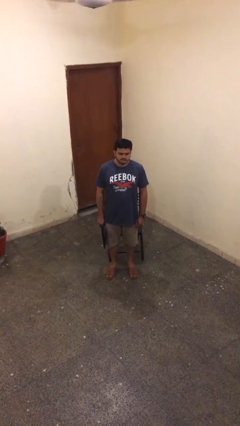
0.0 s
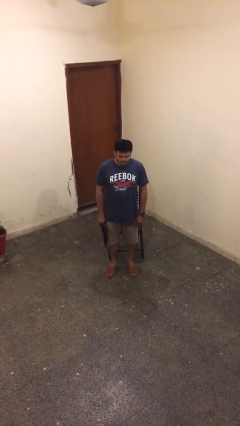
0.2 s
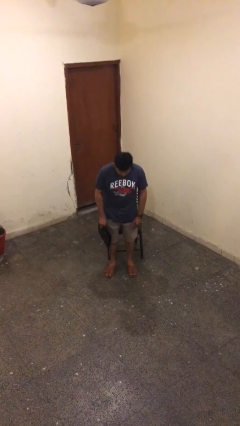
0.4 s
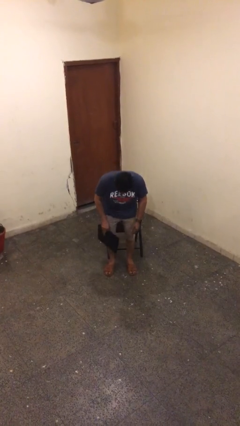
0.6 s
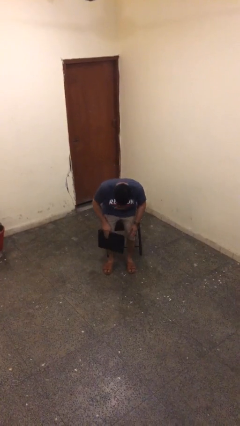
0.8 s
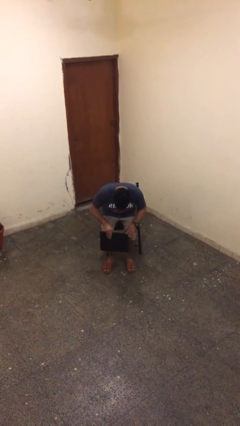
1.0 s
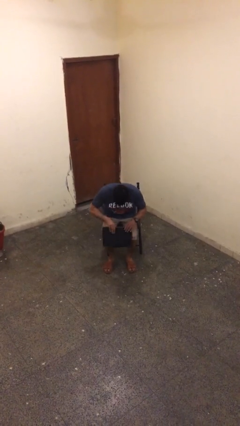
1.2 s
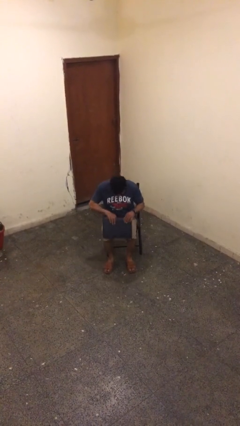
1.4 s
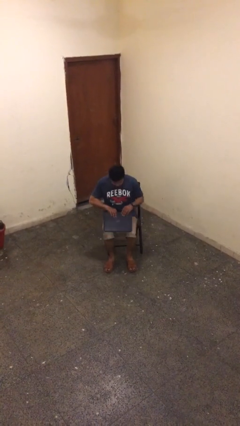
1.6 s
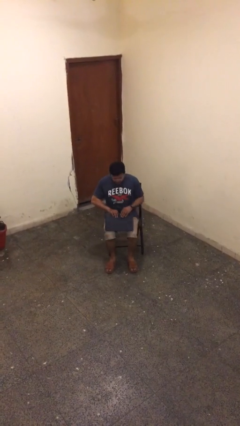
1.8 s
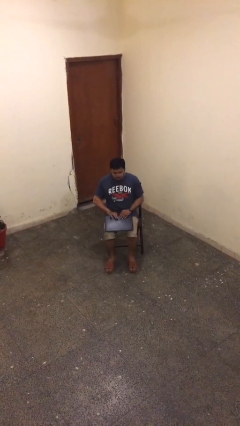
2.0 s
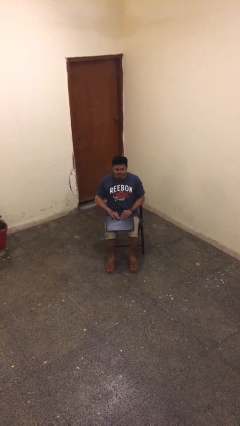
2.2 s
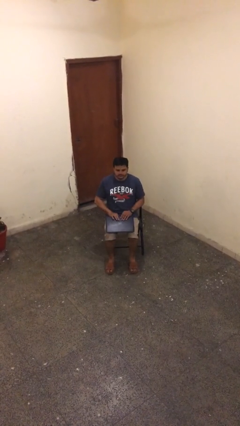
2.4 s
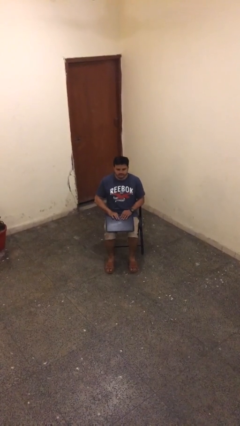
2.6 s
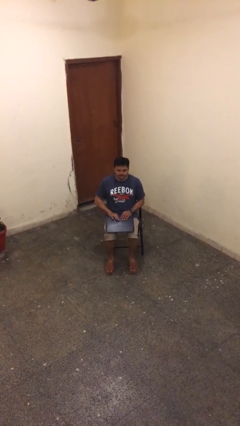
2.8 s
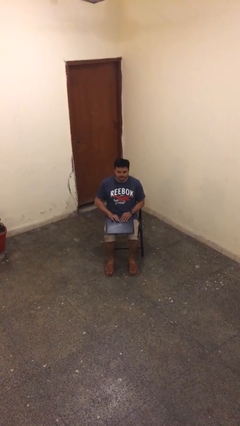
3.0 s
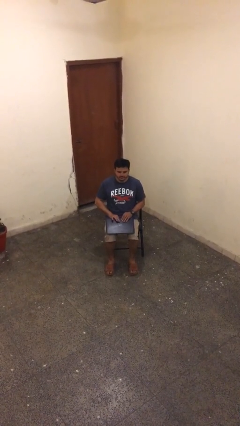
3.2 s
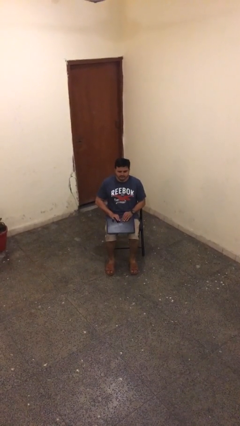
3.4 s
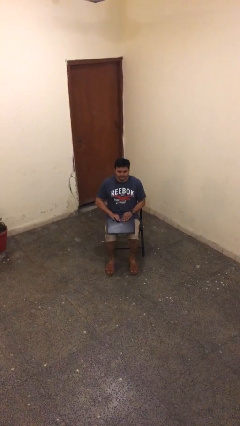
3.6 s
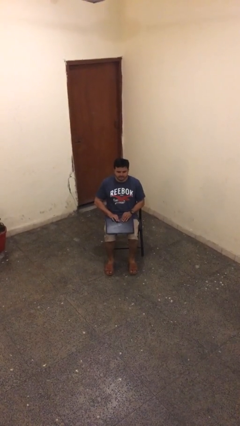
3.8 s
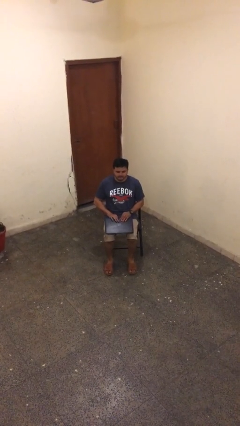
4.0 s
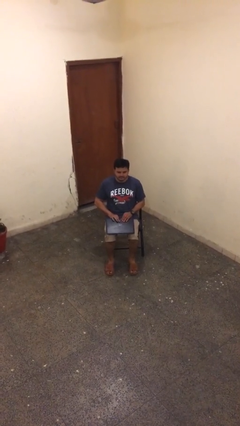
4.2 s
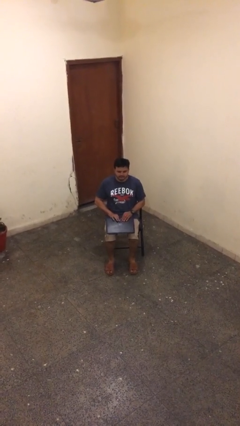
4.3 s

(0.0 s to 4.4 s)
person sits down

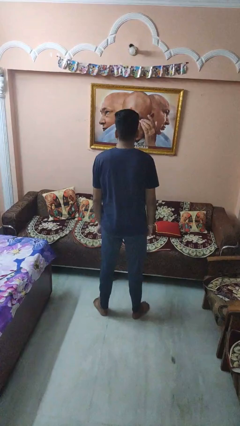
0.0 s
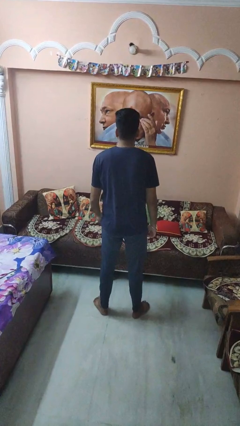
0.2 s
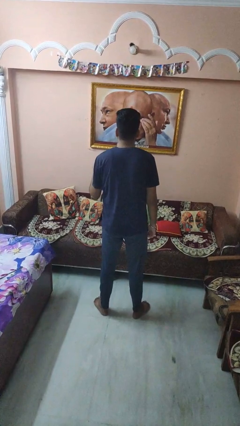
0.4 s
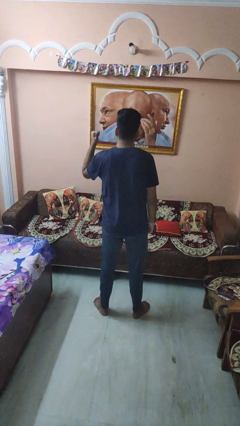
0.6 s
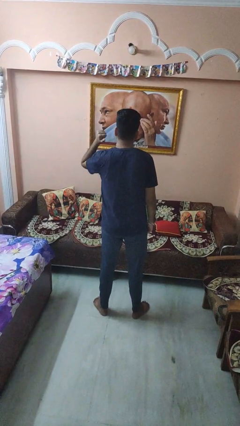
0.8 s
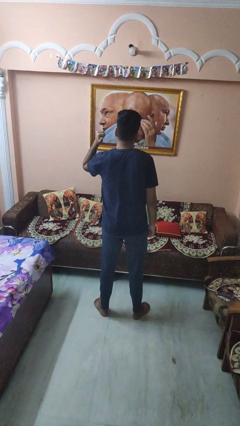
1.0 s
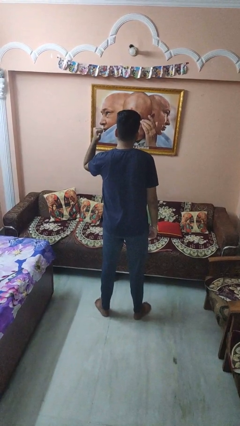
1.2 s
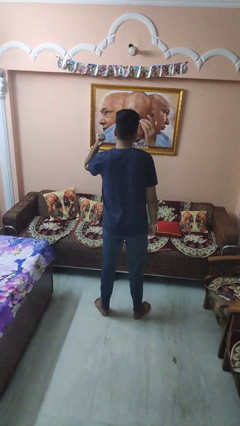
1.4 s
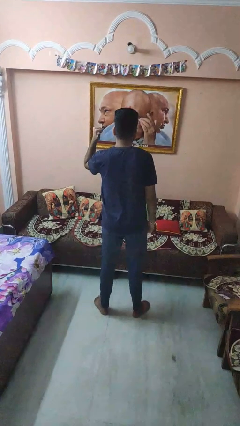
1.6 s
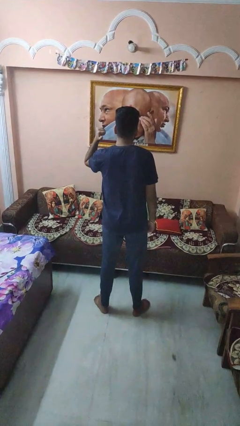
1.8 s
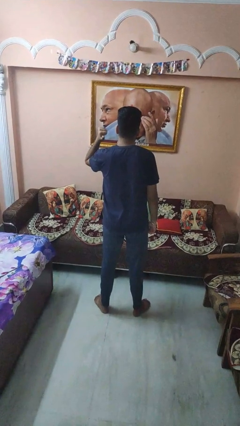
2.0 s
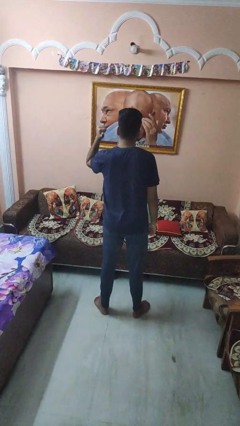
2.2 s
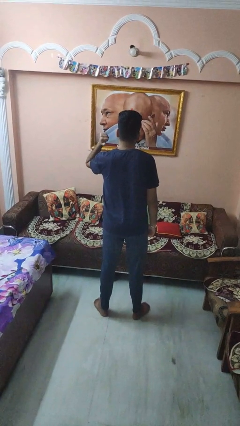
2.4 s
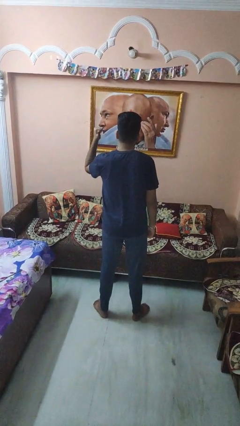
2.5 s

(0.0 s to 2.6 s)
person gestures behind me

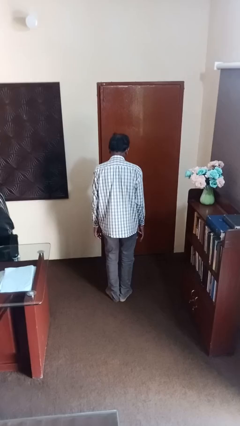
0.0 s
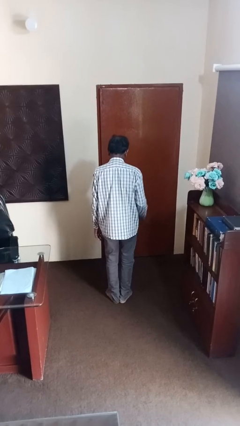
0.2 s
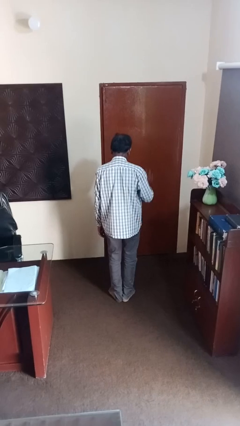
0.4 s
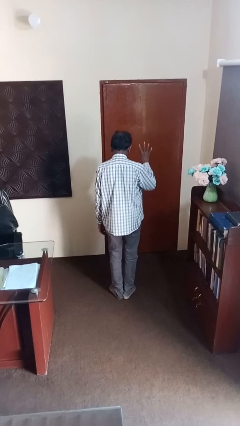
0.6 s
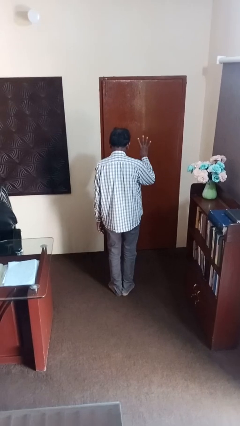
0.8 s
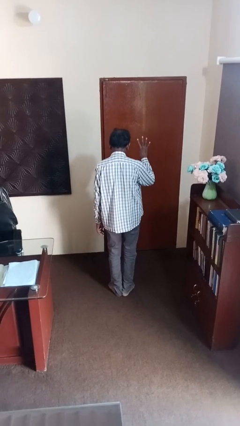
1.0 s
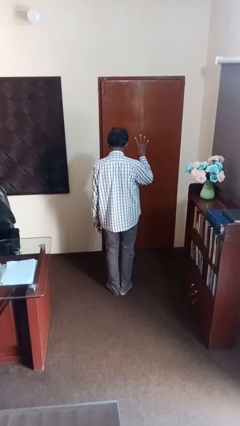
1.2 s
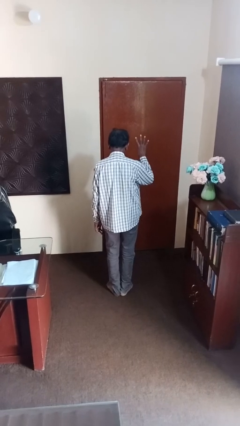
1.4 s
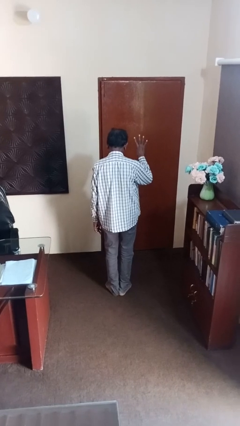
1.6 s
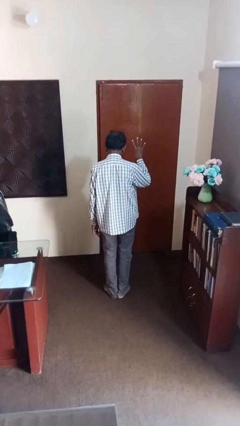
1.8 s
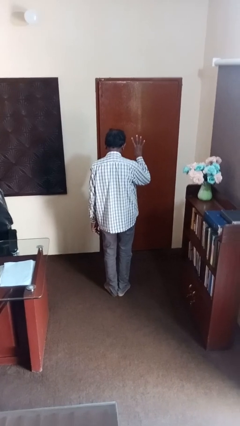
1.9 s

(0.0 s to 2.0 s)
person gestures number four

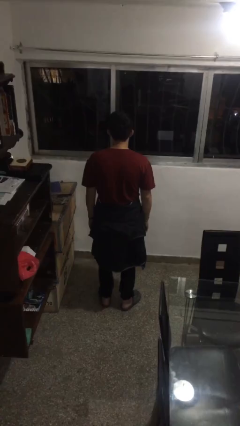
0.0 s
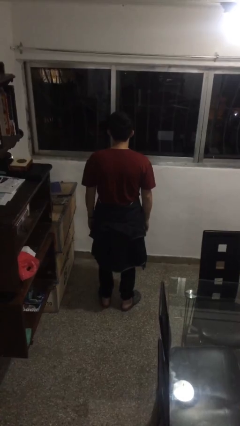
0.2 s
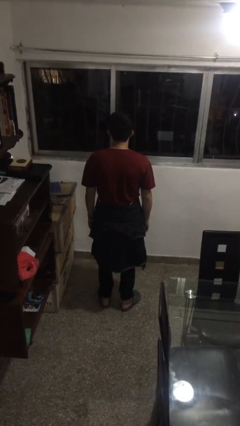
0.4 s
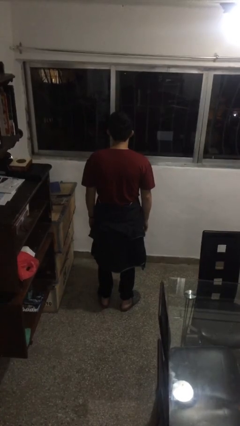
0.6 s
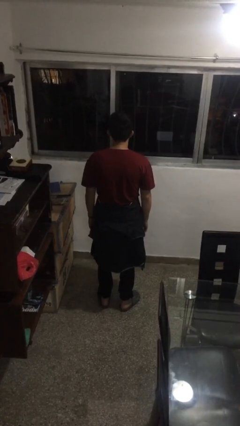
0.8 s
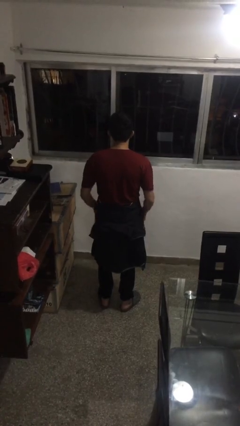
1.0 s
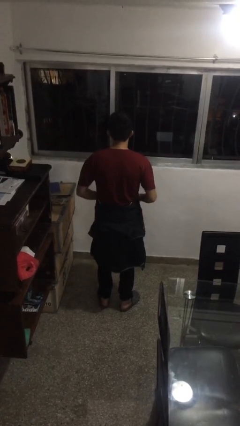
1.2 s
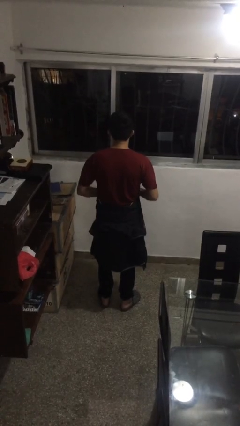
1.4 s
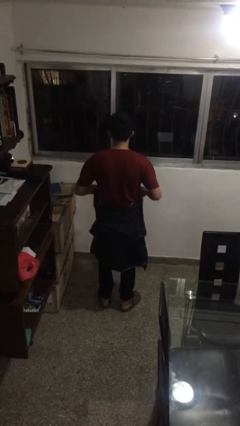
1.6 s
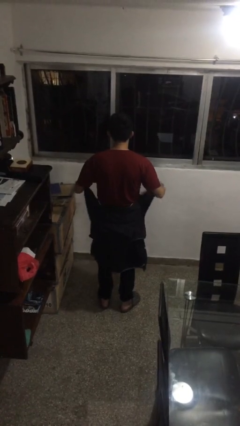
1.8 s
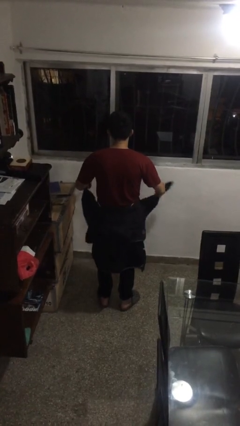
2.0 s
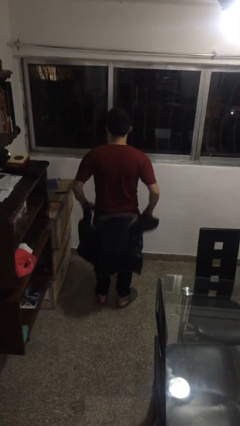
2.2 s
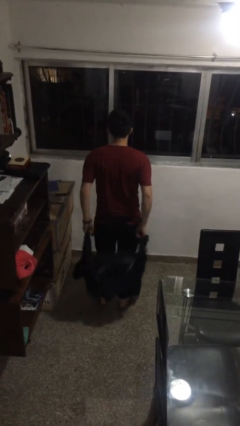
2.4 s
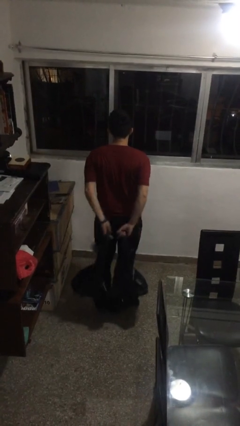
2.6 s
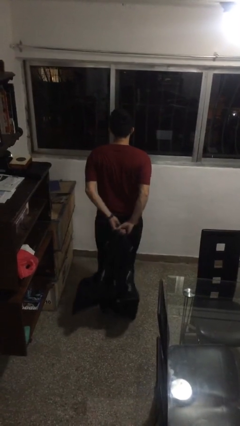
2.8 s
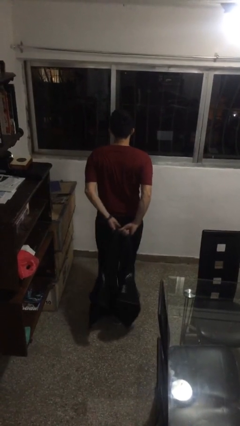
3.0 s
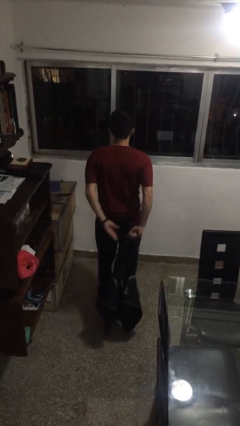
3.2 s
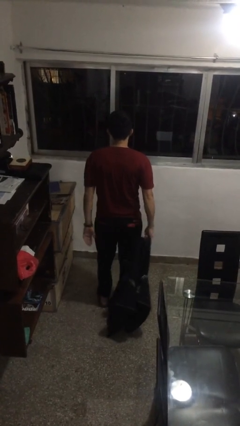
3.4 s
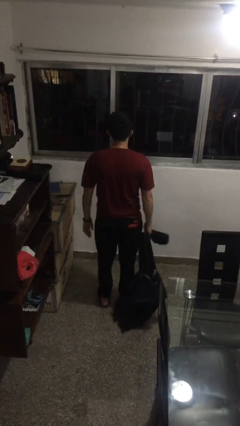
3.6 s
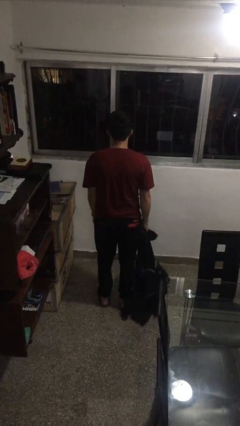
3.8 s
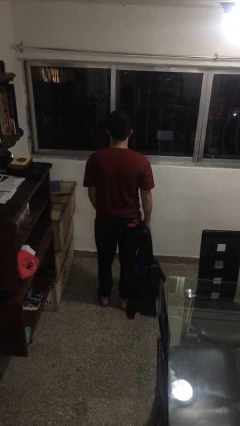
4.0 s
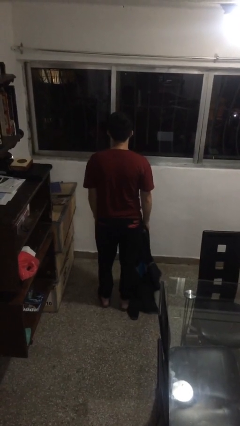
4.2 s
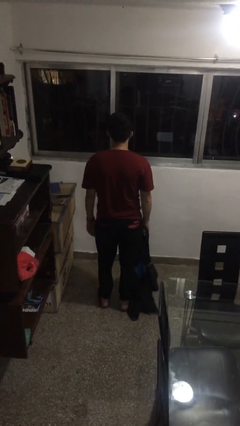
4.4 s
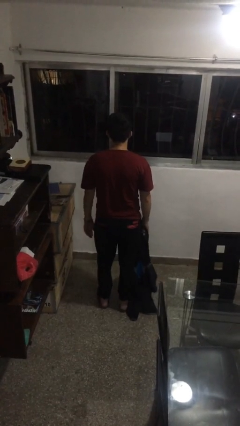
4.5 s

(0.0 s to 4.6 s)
person unties jacket around waist

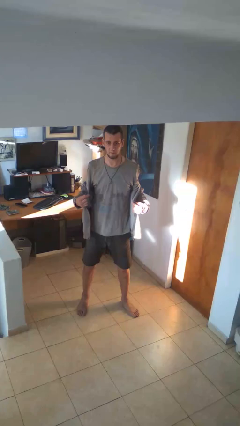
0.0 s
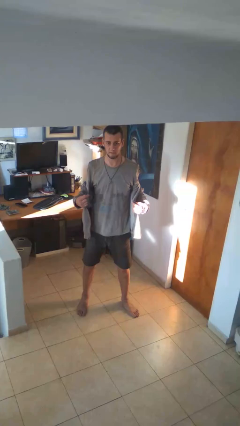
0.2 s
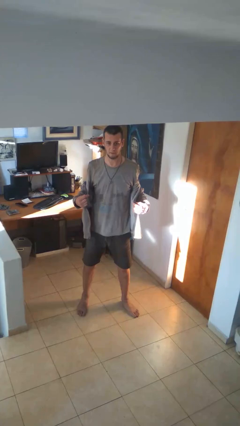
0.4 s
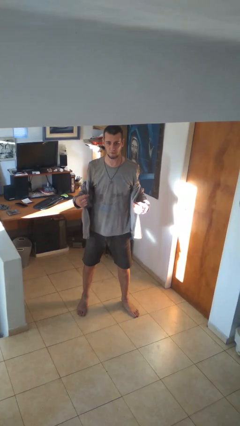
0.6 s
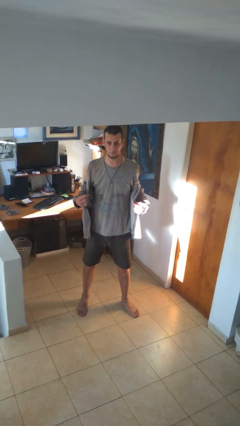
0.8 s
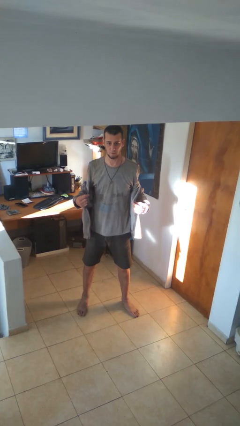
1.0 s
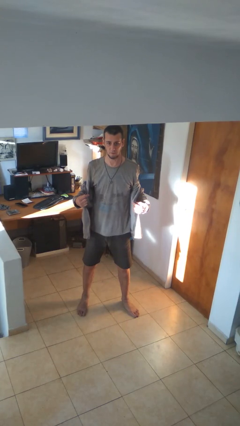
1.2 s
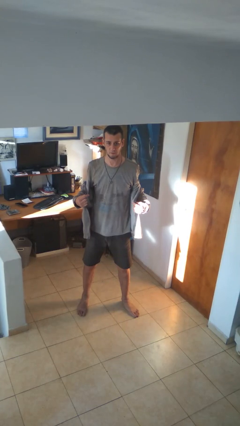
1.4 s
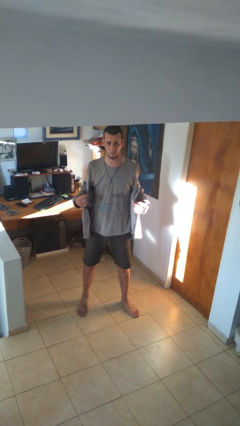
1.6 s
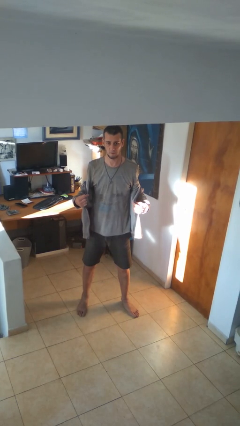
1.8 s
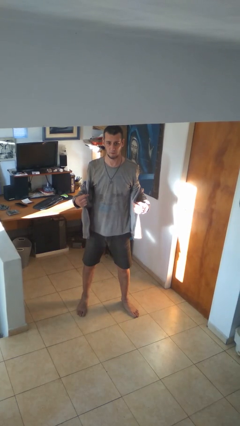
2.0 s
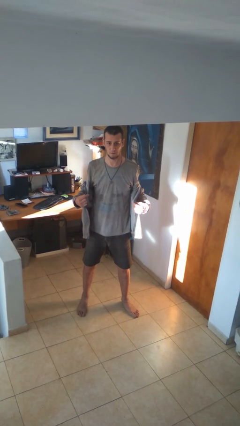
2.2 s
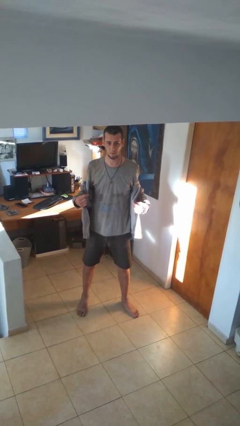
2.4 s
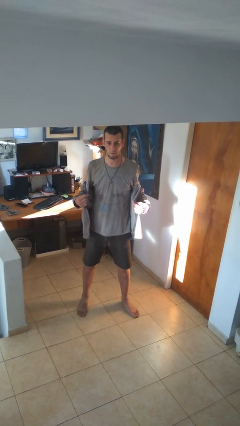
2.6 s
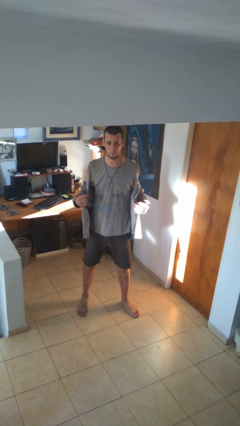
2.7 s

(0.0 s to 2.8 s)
person puts on hoodie

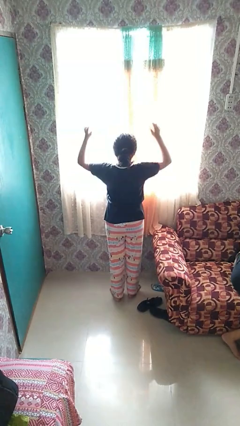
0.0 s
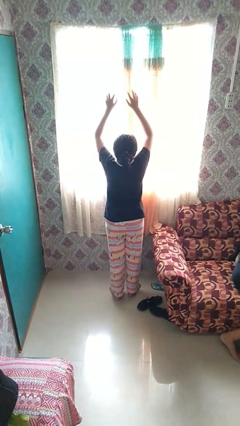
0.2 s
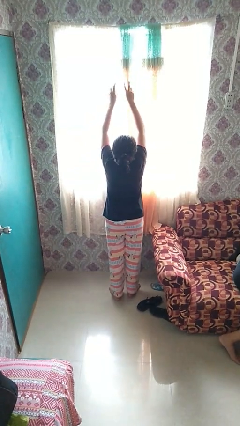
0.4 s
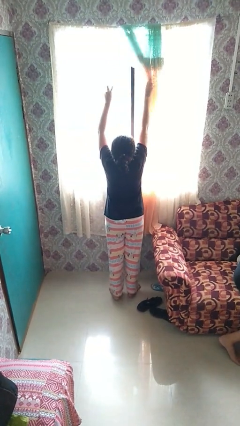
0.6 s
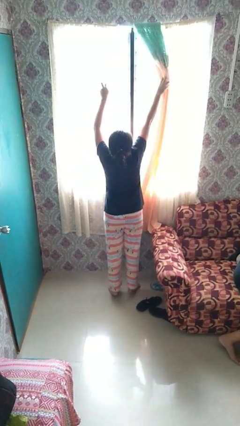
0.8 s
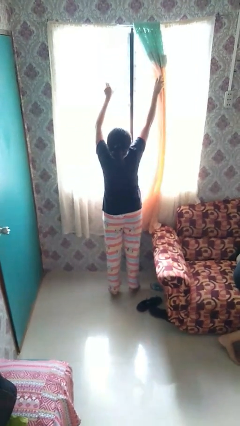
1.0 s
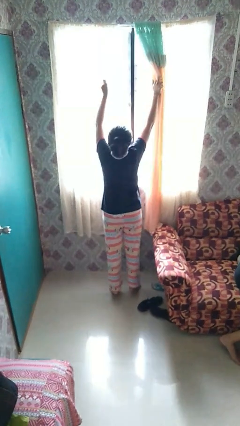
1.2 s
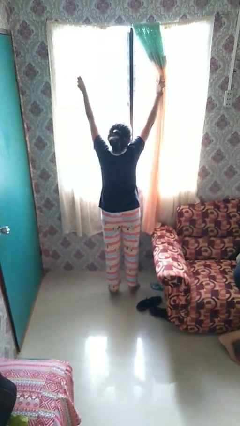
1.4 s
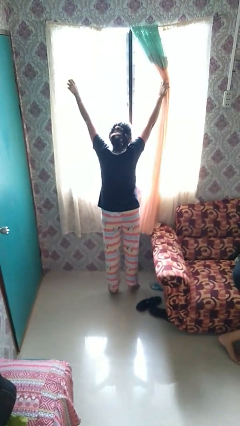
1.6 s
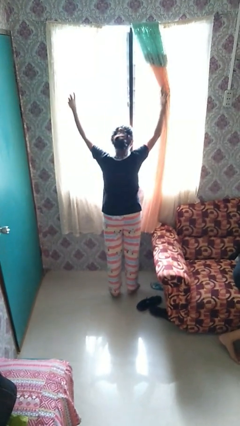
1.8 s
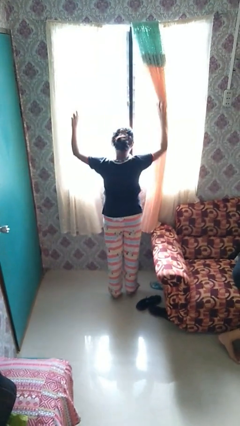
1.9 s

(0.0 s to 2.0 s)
person opens curtains
